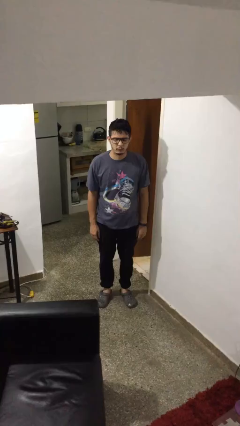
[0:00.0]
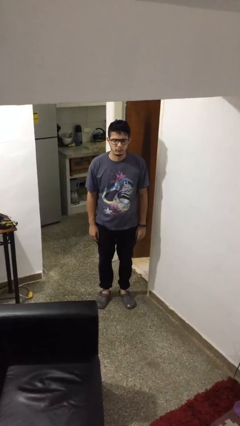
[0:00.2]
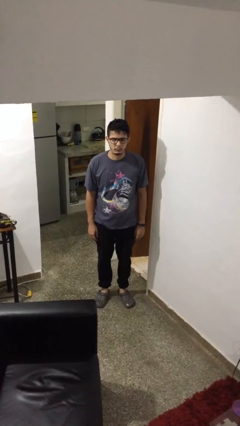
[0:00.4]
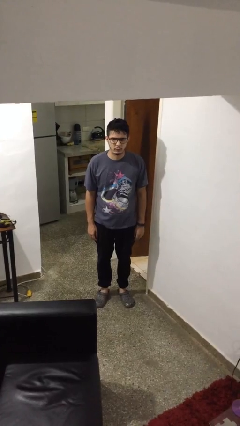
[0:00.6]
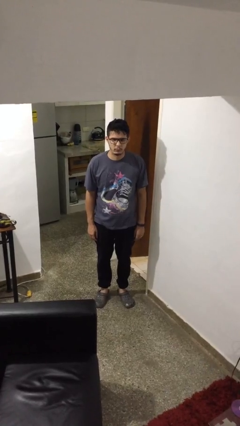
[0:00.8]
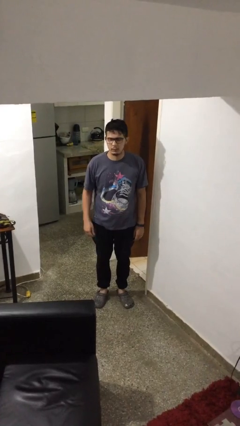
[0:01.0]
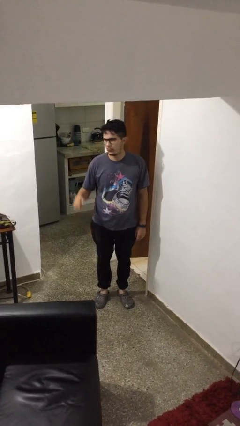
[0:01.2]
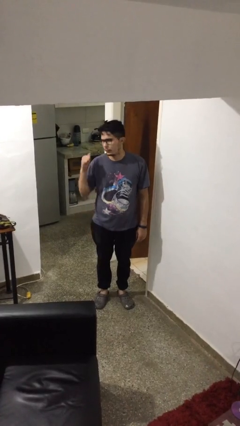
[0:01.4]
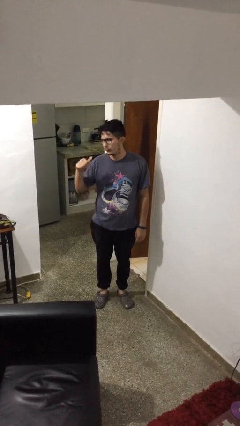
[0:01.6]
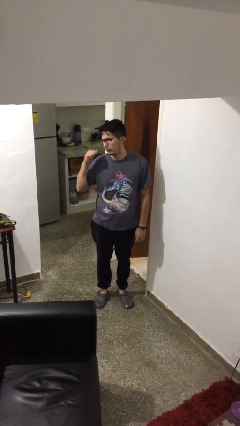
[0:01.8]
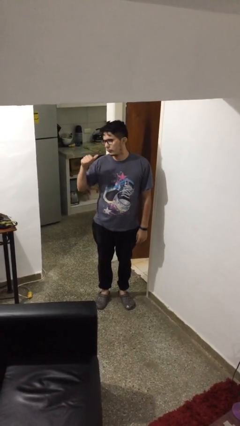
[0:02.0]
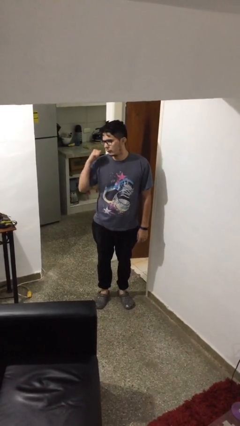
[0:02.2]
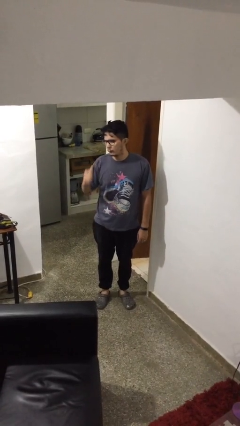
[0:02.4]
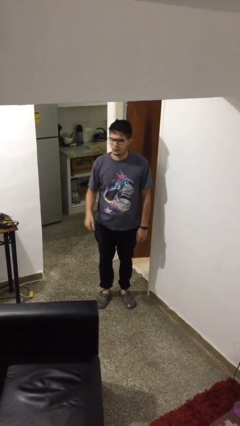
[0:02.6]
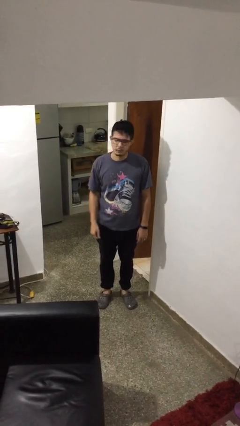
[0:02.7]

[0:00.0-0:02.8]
person gestures behind me

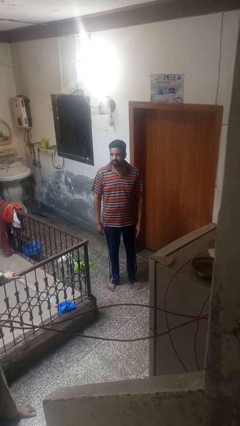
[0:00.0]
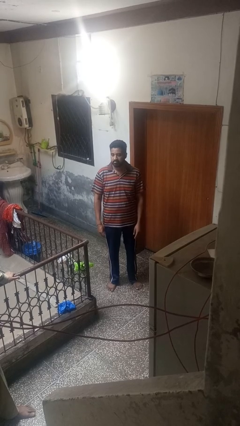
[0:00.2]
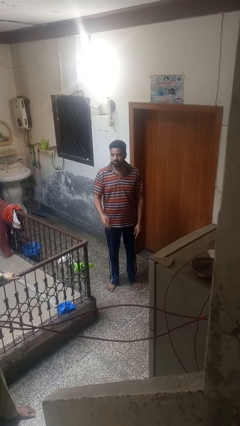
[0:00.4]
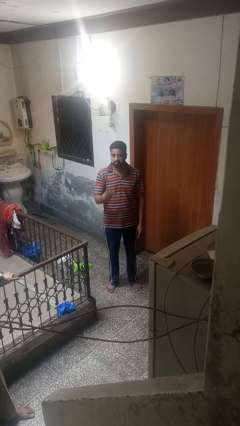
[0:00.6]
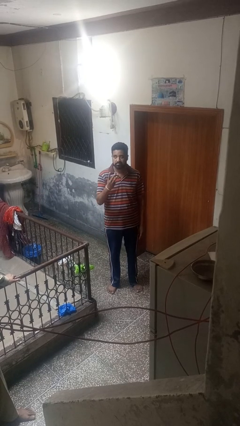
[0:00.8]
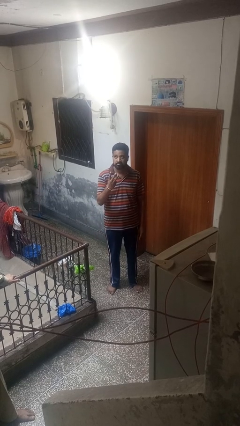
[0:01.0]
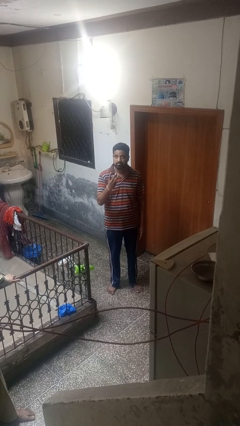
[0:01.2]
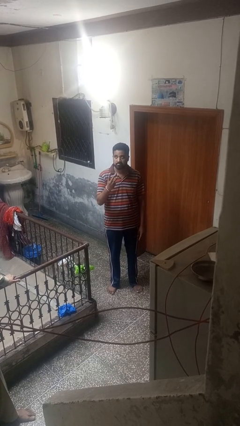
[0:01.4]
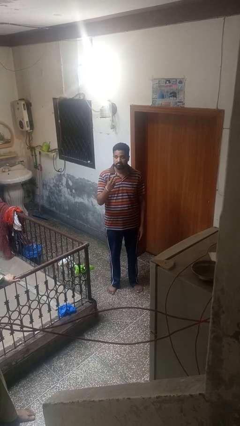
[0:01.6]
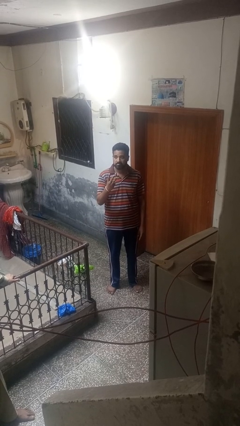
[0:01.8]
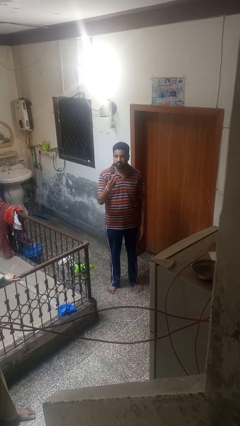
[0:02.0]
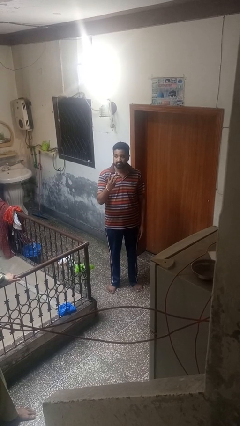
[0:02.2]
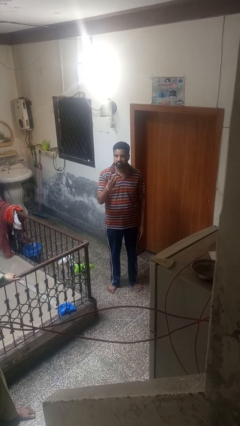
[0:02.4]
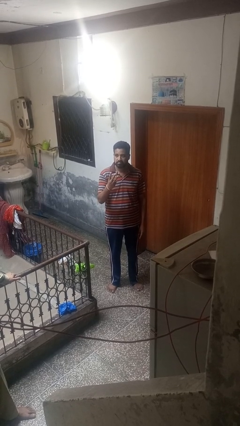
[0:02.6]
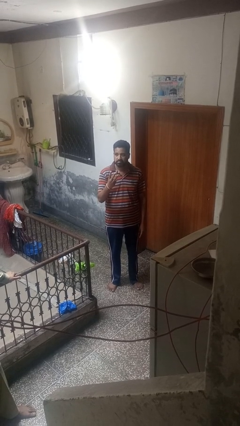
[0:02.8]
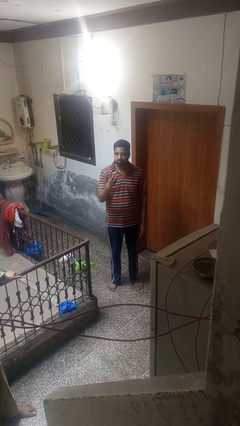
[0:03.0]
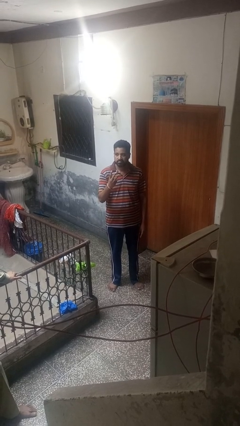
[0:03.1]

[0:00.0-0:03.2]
person gestures number three

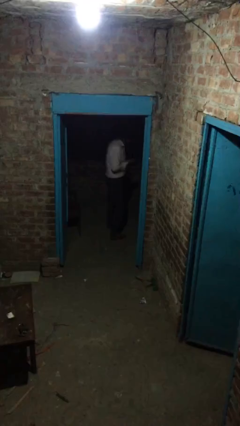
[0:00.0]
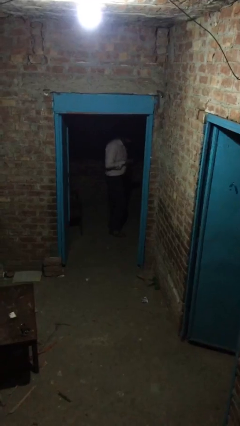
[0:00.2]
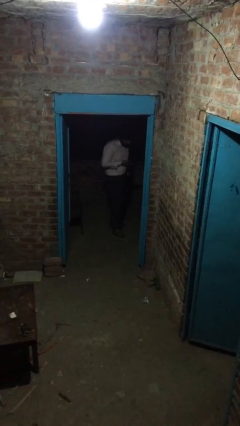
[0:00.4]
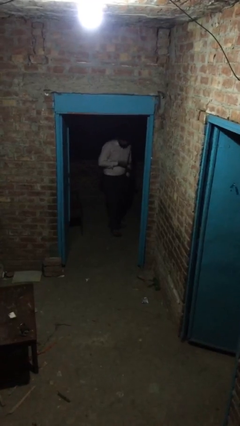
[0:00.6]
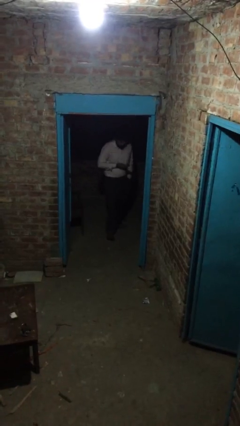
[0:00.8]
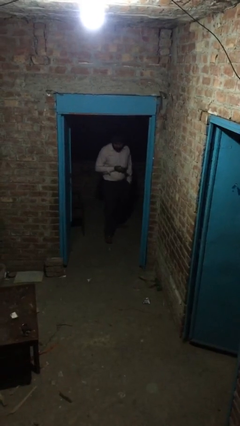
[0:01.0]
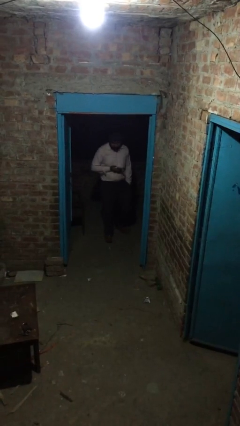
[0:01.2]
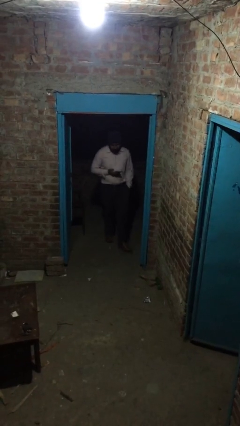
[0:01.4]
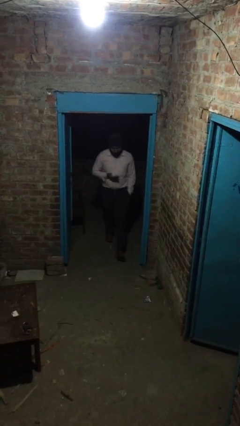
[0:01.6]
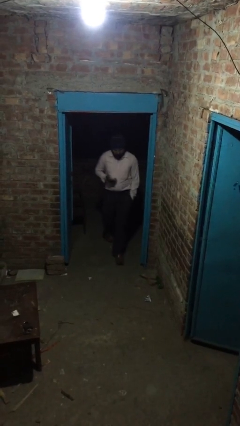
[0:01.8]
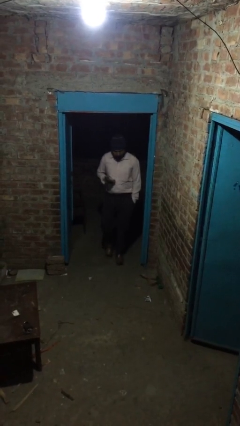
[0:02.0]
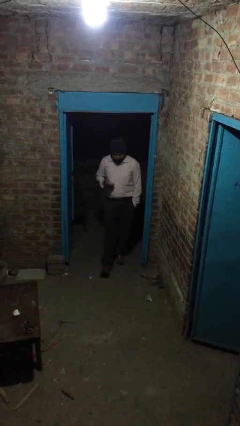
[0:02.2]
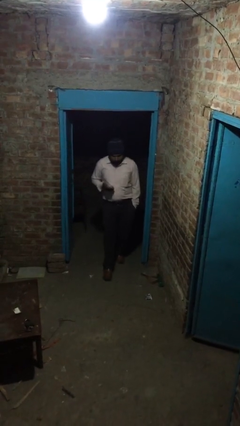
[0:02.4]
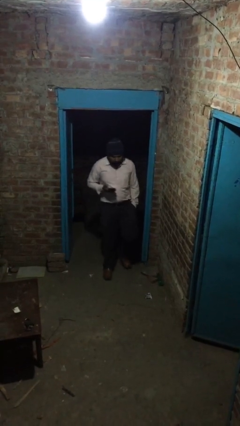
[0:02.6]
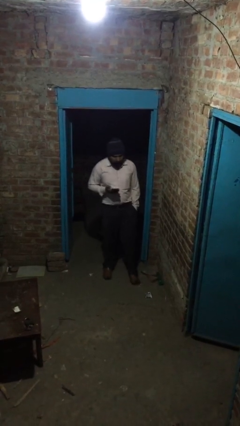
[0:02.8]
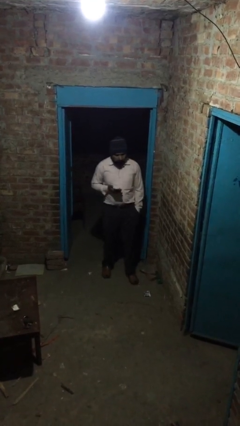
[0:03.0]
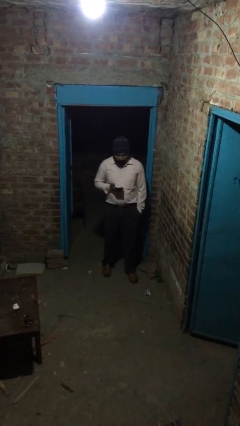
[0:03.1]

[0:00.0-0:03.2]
person enters scene through structure

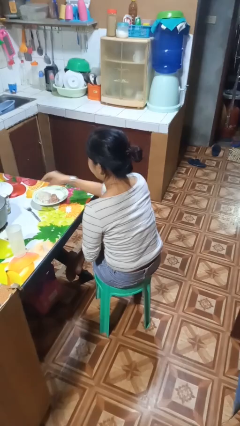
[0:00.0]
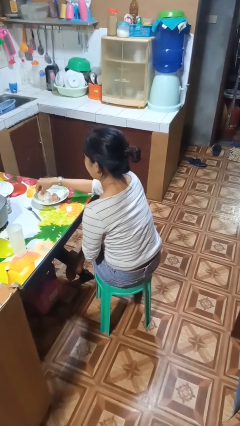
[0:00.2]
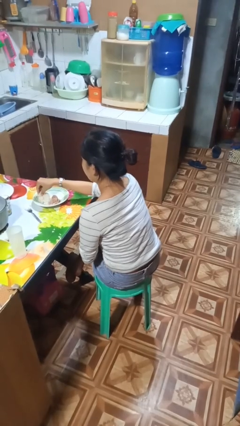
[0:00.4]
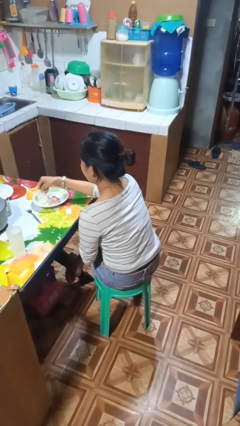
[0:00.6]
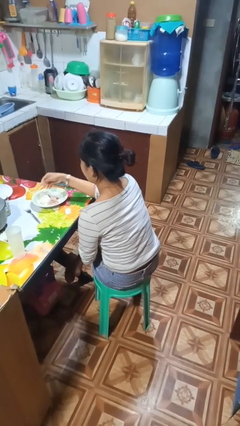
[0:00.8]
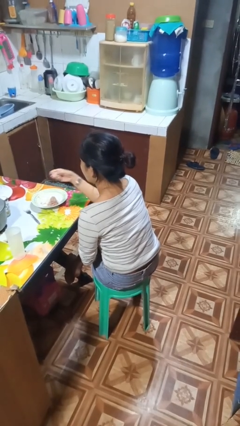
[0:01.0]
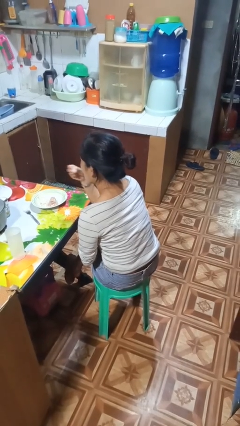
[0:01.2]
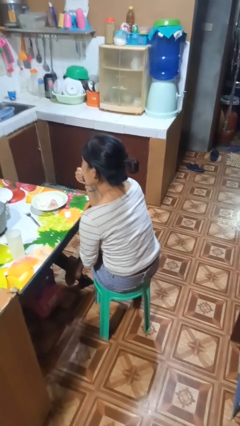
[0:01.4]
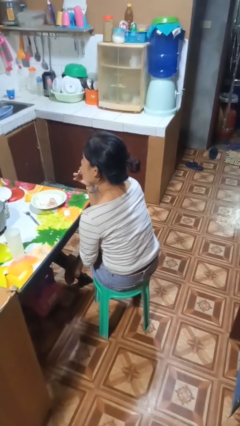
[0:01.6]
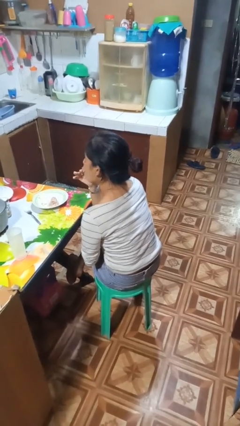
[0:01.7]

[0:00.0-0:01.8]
person eats with hands

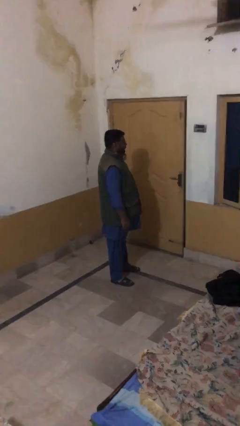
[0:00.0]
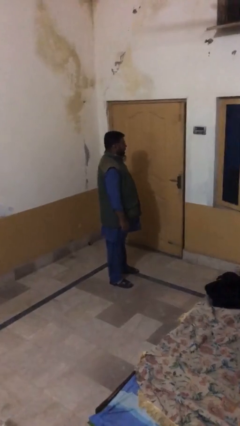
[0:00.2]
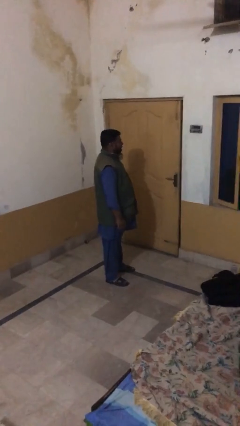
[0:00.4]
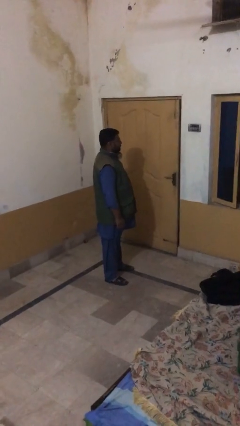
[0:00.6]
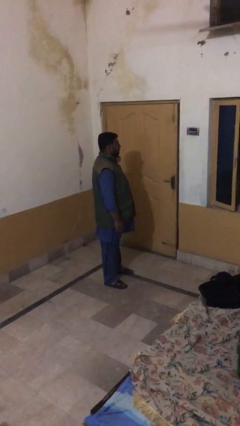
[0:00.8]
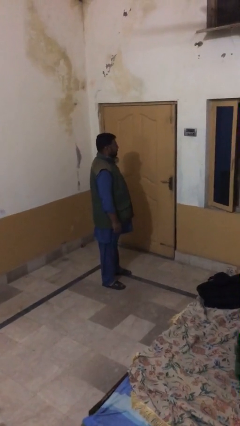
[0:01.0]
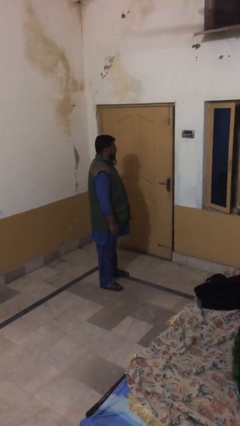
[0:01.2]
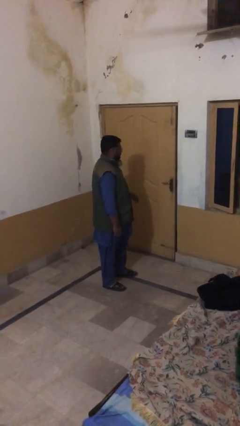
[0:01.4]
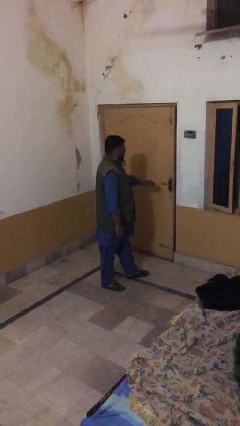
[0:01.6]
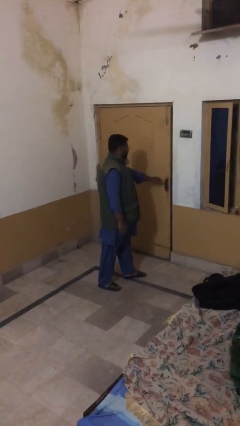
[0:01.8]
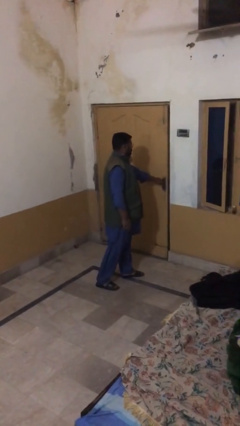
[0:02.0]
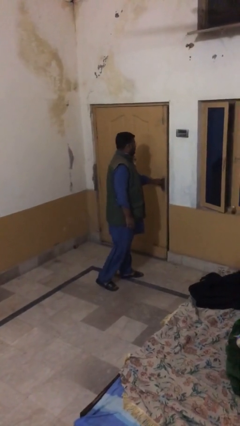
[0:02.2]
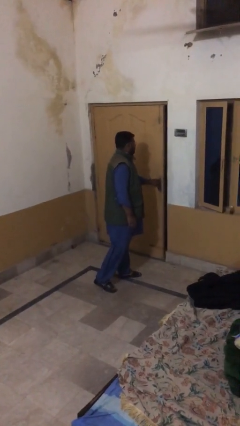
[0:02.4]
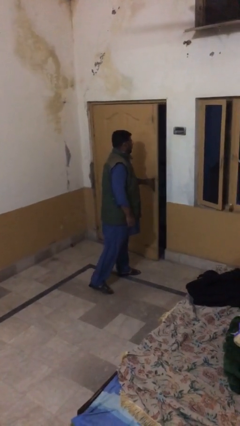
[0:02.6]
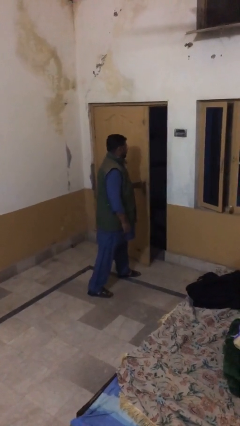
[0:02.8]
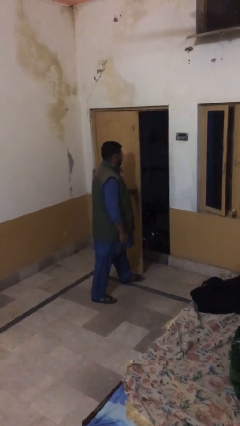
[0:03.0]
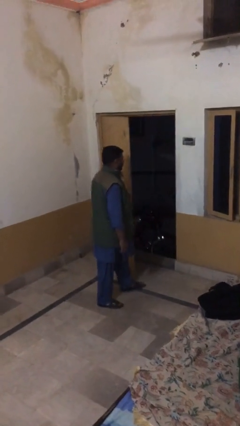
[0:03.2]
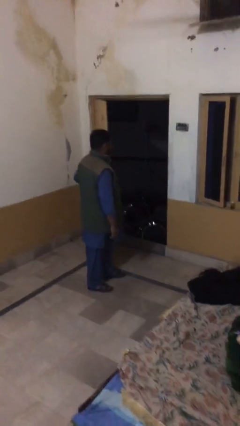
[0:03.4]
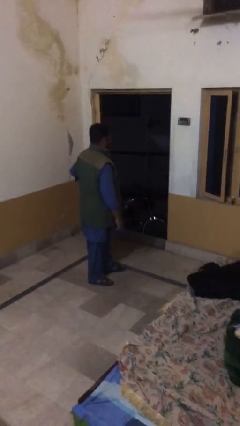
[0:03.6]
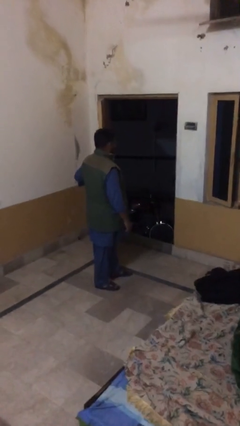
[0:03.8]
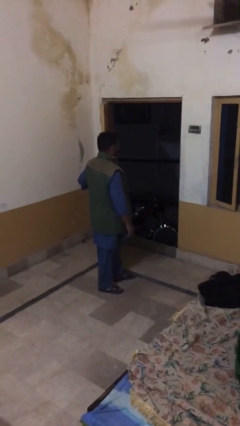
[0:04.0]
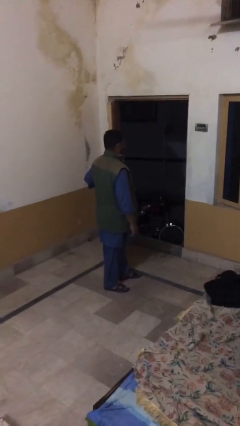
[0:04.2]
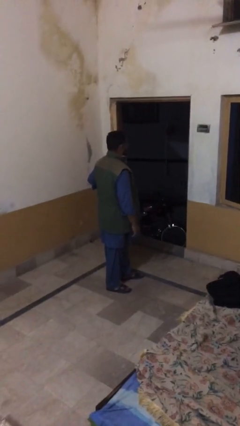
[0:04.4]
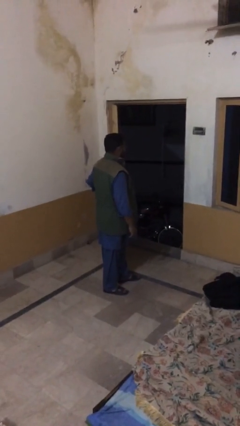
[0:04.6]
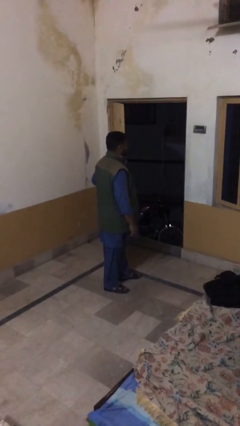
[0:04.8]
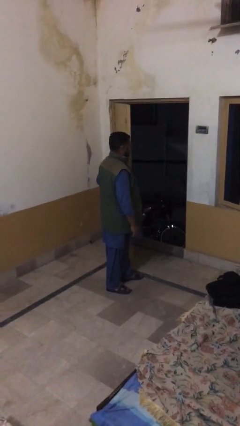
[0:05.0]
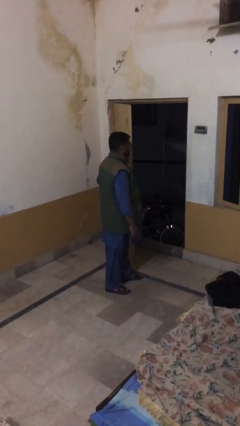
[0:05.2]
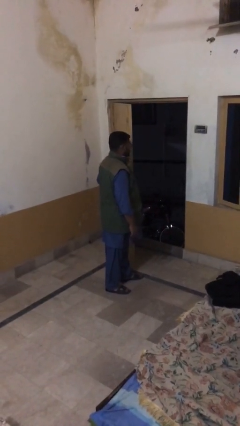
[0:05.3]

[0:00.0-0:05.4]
person opens facility door

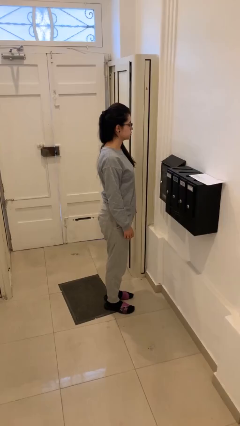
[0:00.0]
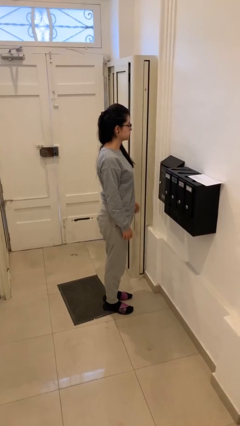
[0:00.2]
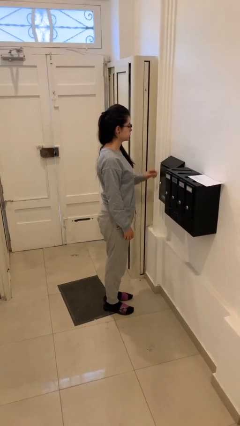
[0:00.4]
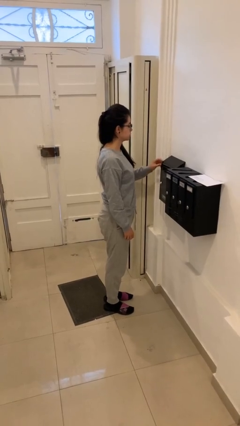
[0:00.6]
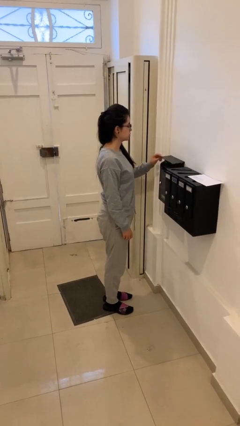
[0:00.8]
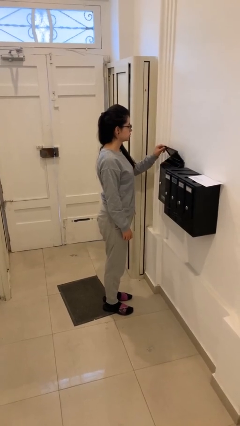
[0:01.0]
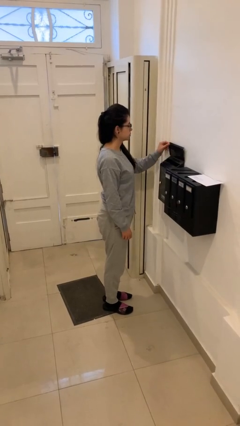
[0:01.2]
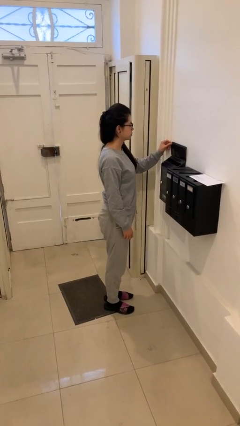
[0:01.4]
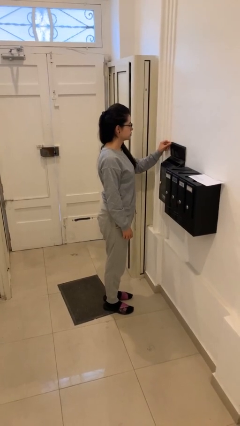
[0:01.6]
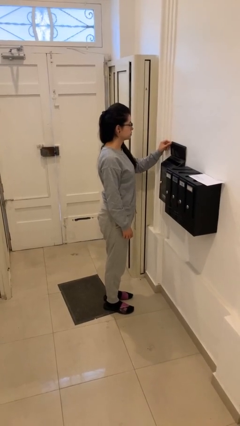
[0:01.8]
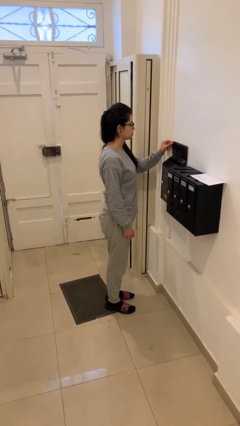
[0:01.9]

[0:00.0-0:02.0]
person opens mailbox
